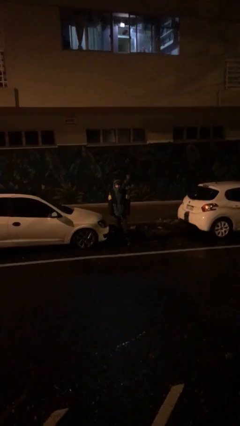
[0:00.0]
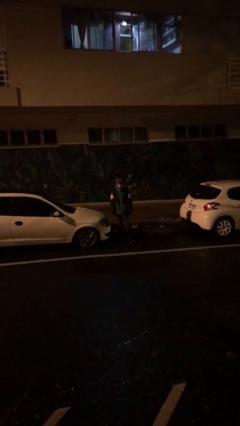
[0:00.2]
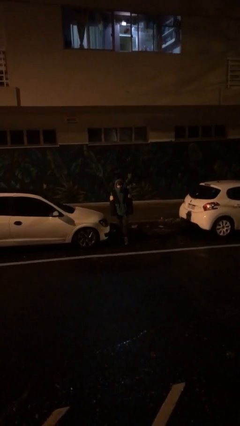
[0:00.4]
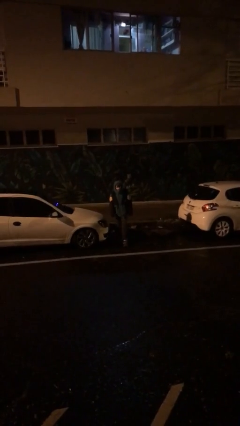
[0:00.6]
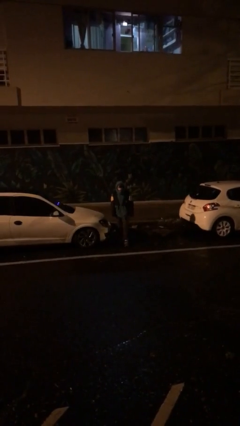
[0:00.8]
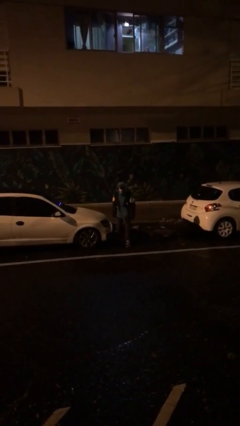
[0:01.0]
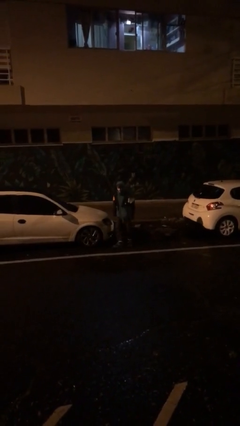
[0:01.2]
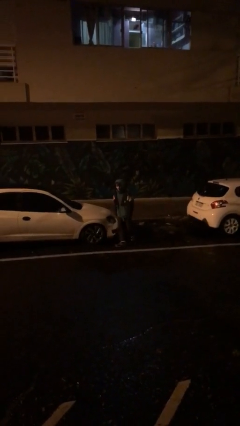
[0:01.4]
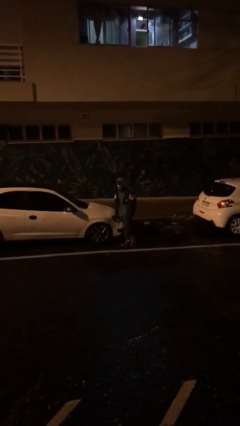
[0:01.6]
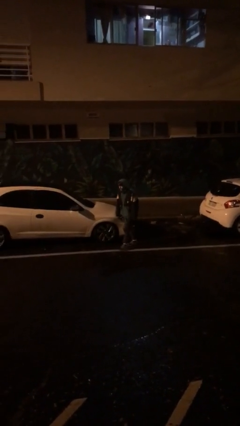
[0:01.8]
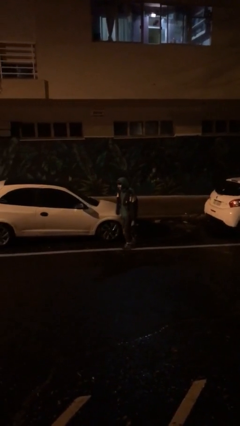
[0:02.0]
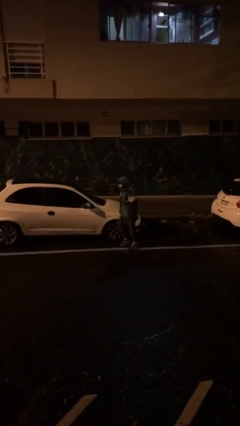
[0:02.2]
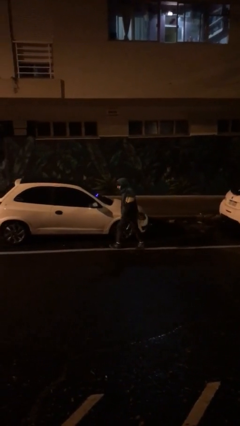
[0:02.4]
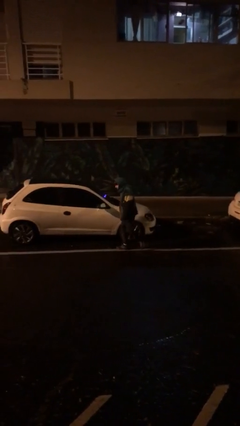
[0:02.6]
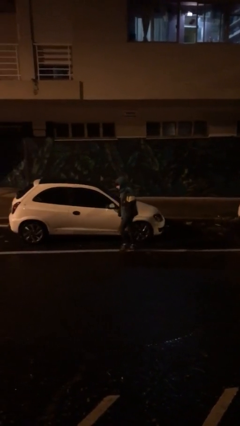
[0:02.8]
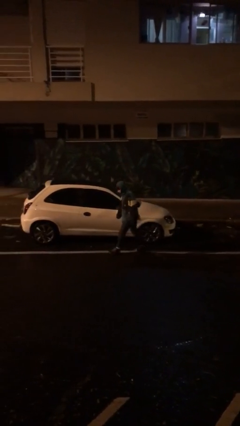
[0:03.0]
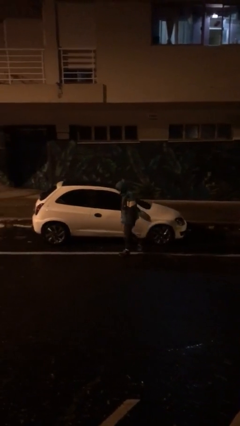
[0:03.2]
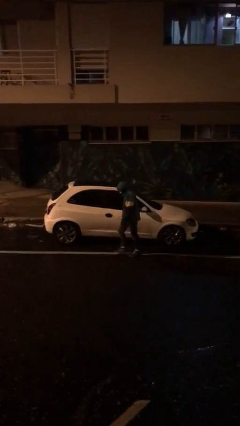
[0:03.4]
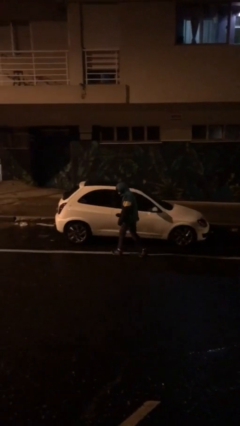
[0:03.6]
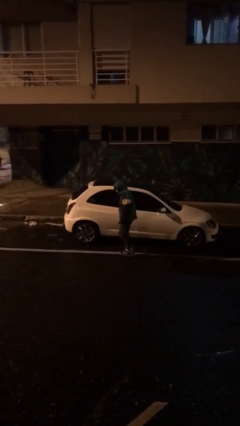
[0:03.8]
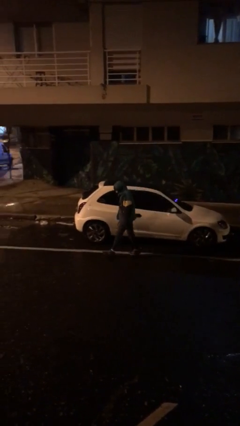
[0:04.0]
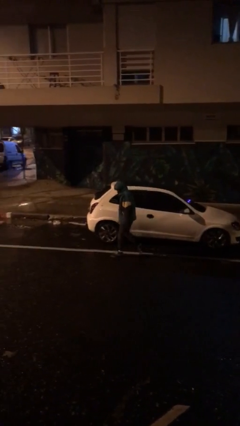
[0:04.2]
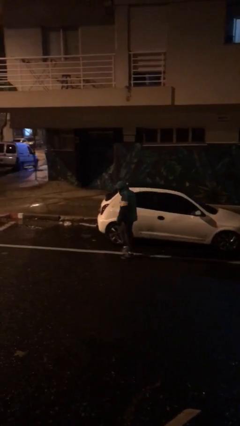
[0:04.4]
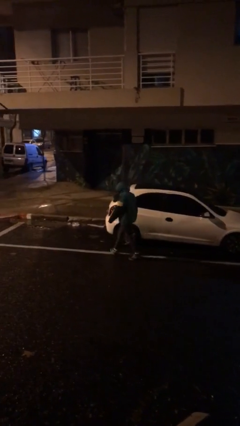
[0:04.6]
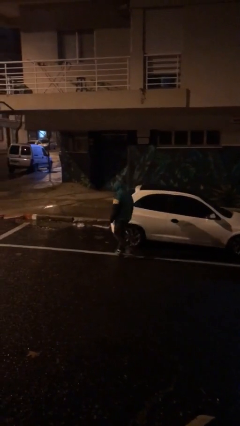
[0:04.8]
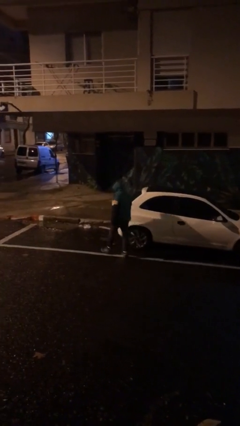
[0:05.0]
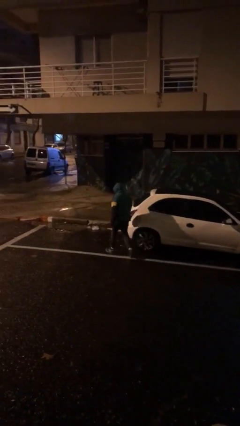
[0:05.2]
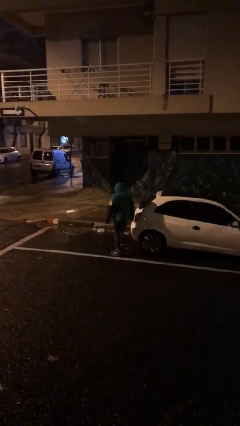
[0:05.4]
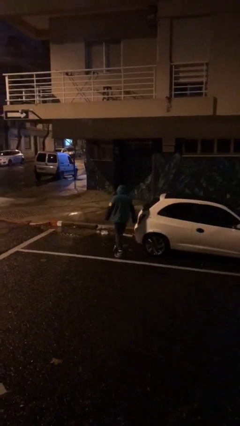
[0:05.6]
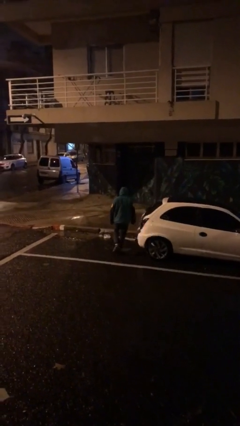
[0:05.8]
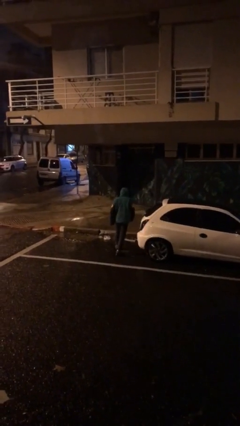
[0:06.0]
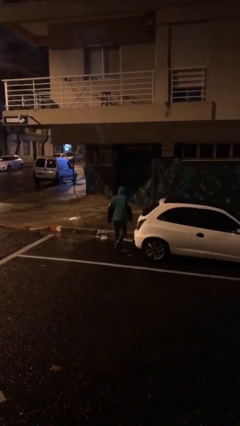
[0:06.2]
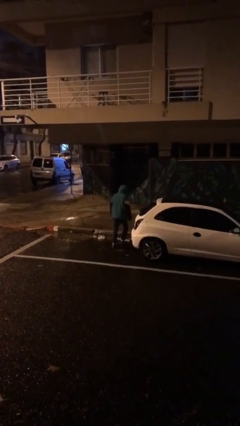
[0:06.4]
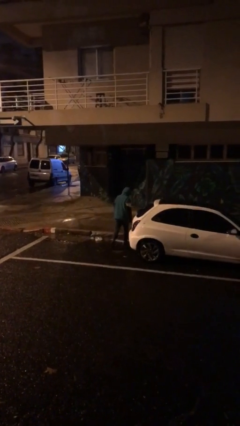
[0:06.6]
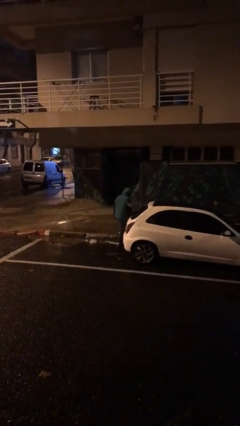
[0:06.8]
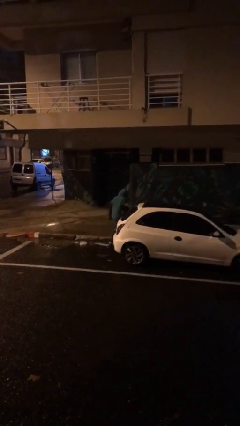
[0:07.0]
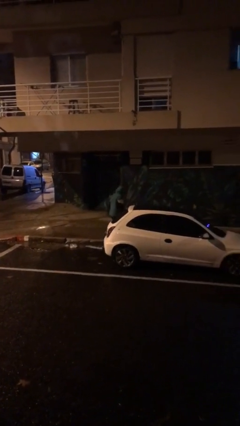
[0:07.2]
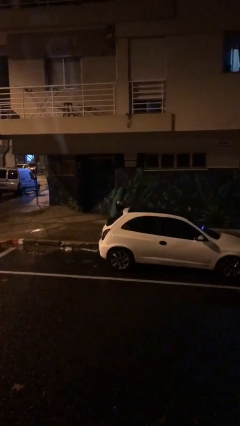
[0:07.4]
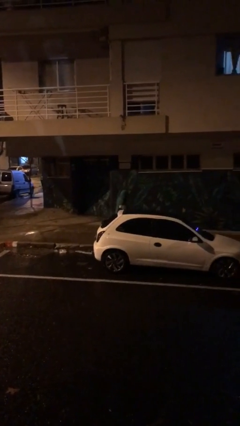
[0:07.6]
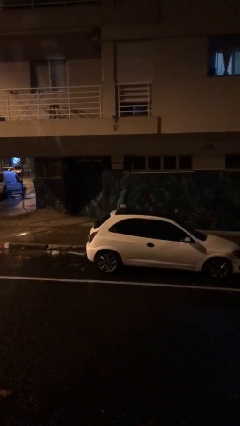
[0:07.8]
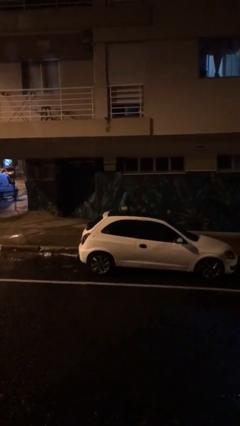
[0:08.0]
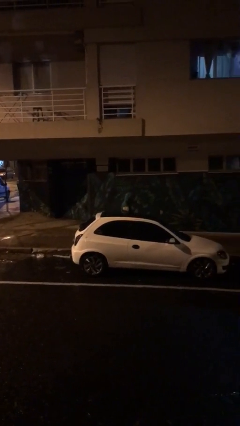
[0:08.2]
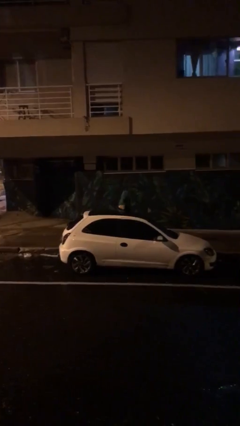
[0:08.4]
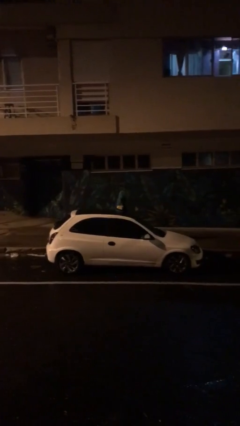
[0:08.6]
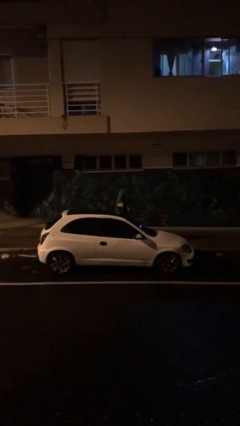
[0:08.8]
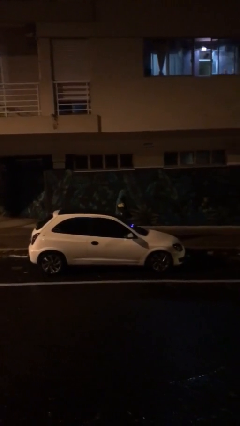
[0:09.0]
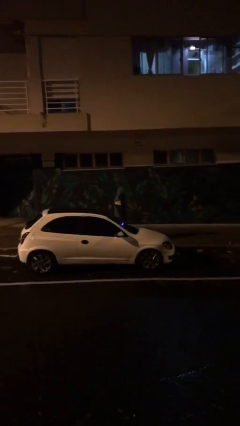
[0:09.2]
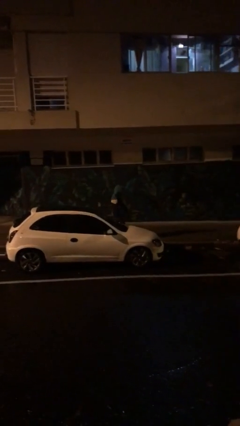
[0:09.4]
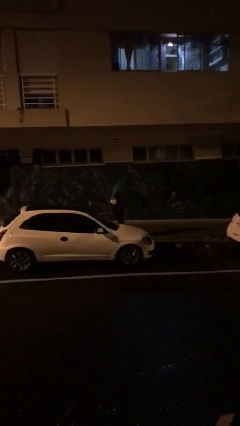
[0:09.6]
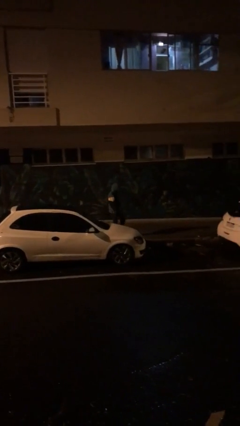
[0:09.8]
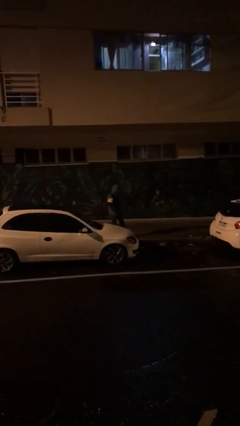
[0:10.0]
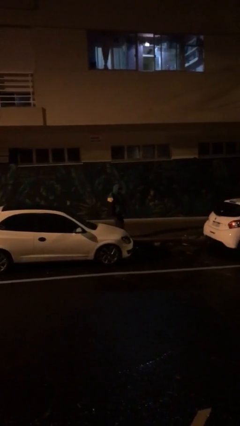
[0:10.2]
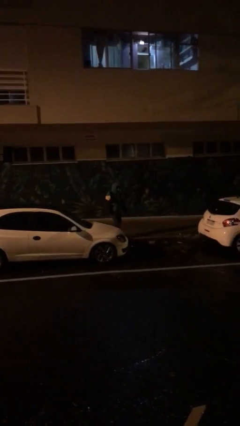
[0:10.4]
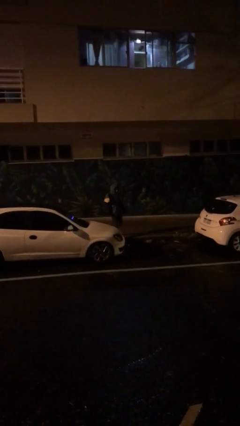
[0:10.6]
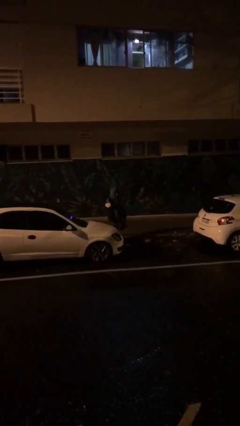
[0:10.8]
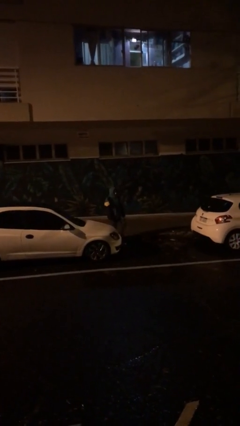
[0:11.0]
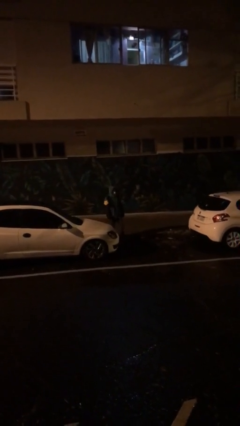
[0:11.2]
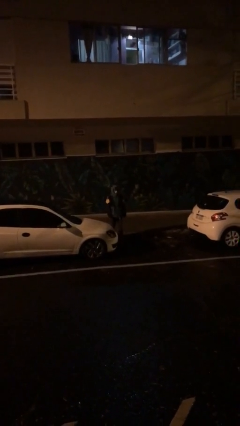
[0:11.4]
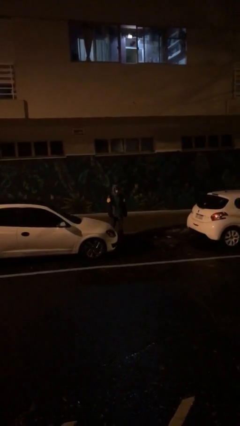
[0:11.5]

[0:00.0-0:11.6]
person walks around car

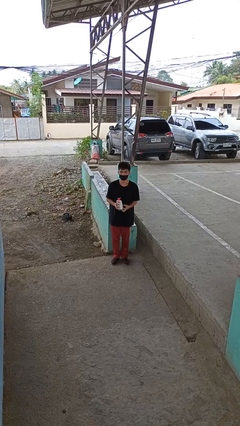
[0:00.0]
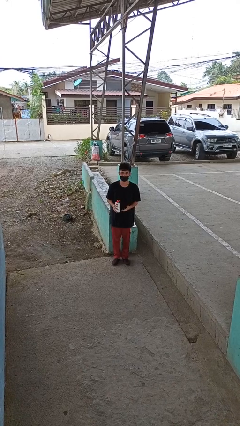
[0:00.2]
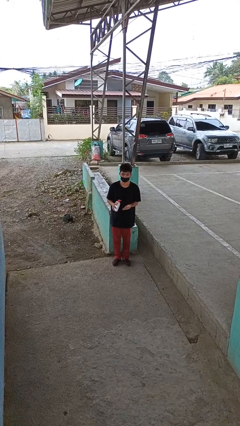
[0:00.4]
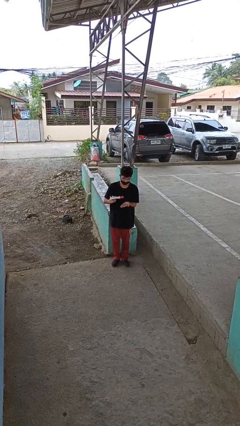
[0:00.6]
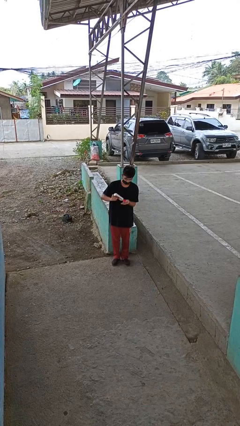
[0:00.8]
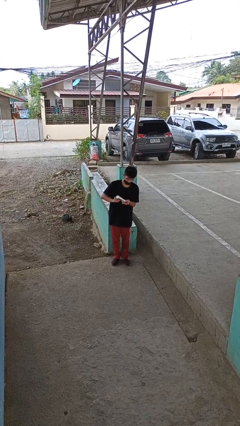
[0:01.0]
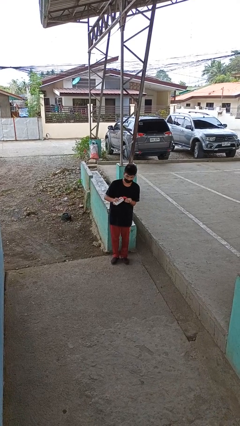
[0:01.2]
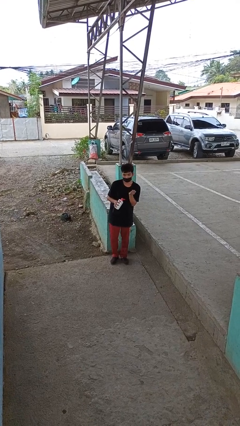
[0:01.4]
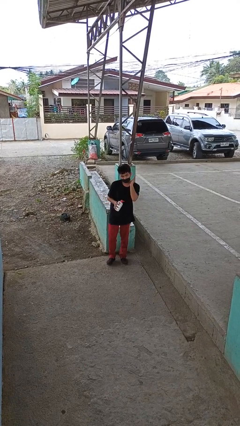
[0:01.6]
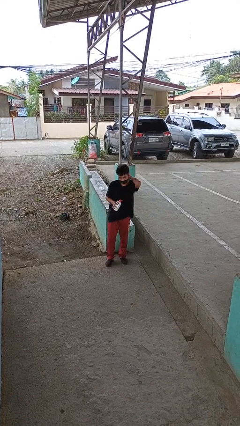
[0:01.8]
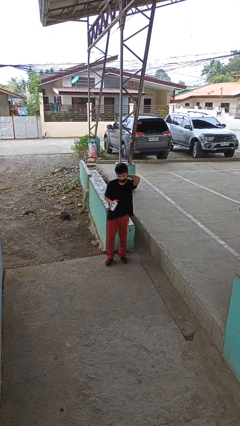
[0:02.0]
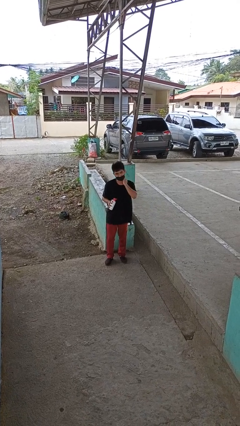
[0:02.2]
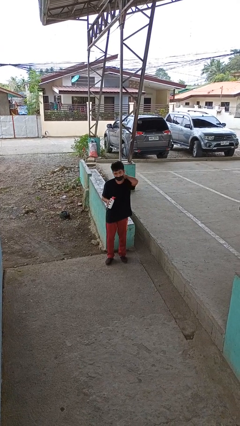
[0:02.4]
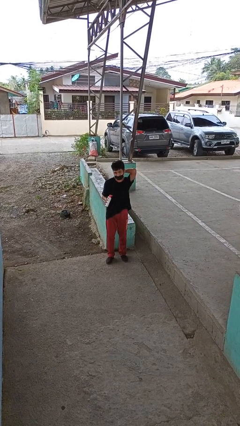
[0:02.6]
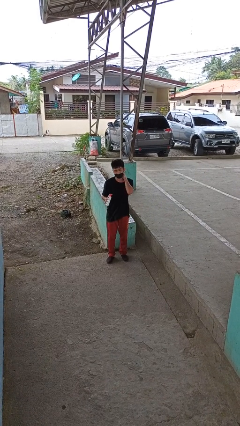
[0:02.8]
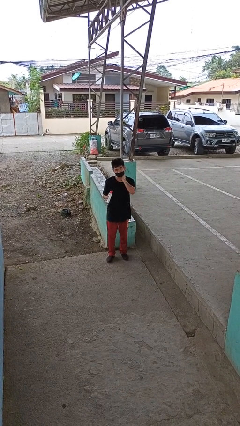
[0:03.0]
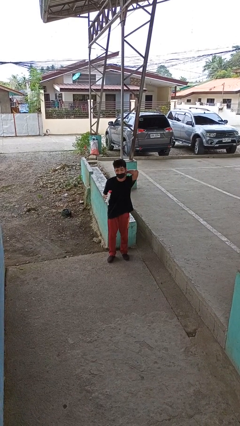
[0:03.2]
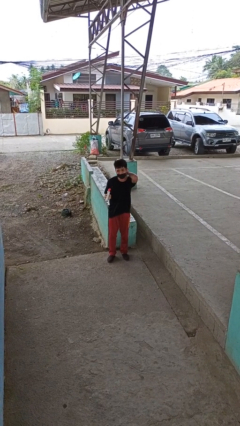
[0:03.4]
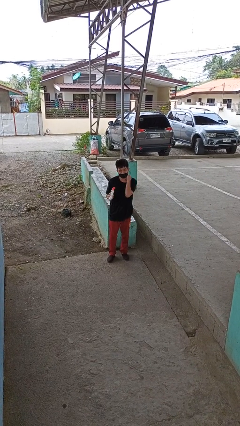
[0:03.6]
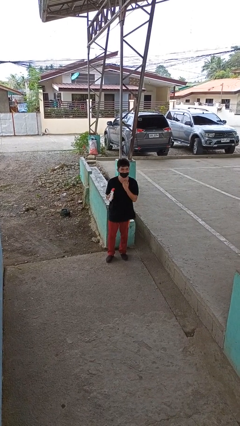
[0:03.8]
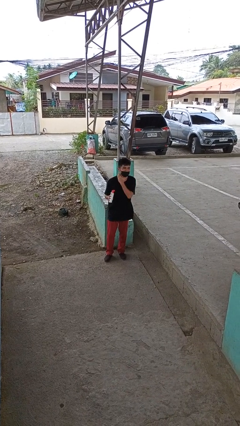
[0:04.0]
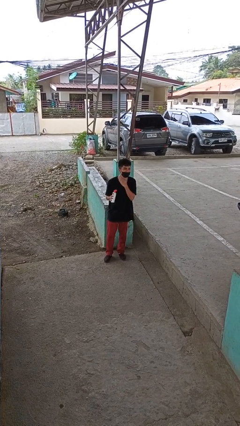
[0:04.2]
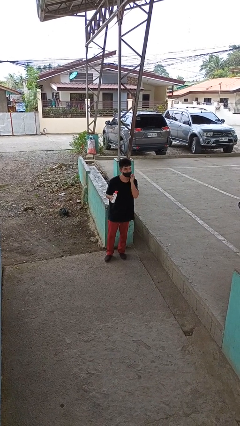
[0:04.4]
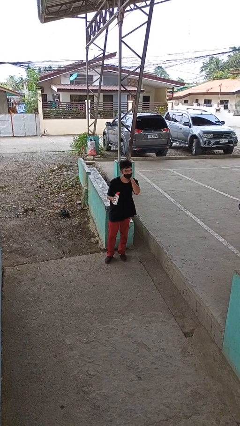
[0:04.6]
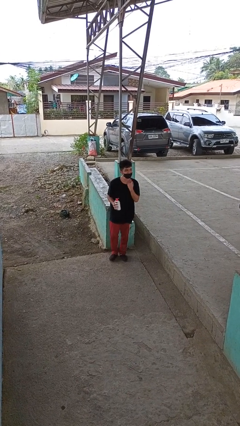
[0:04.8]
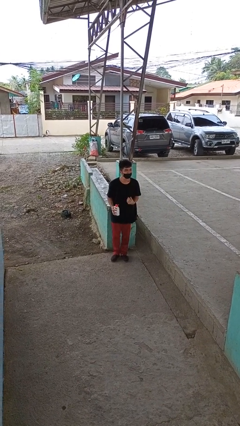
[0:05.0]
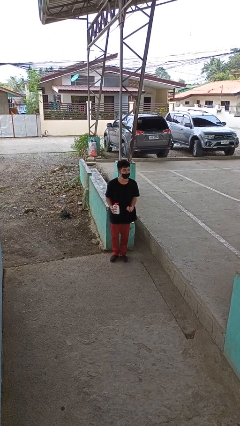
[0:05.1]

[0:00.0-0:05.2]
person applies sunscreen

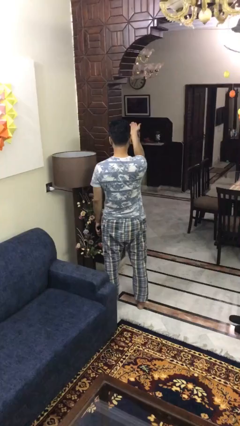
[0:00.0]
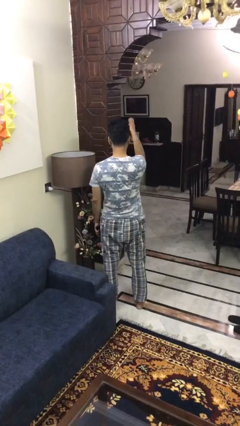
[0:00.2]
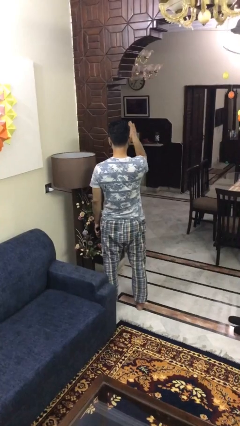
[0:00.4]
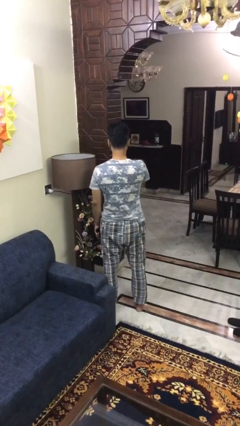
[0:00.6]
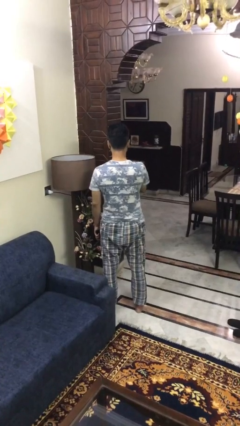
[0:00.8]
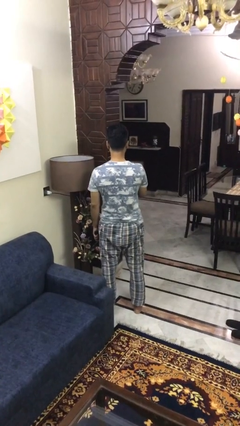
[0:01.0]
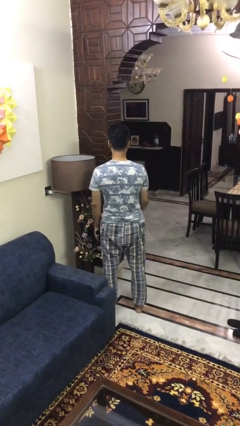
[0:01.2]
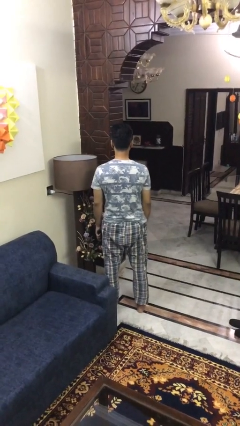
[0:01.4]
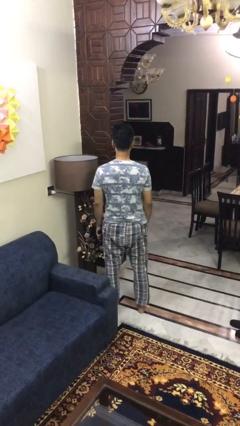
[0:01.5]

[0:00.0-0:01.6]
person gestures swipe down
